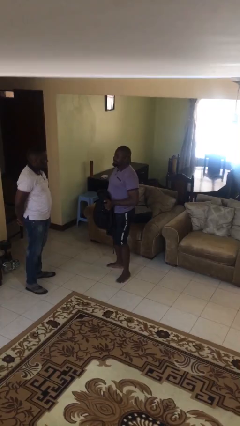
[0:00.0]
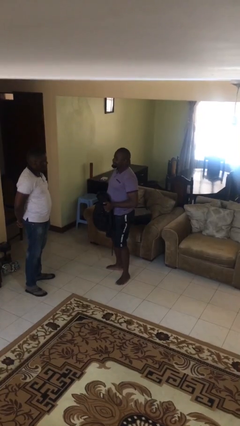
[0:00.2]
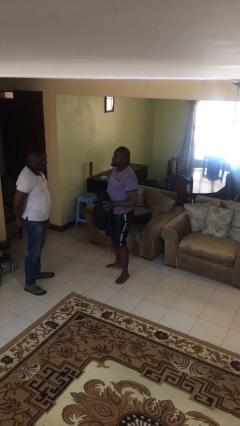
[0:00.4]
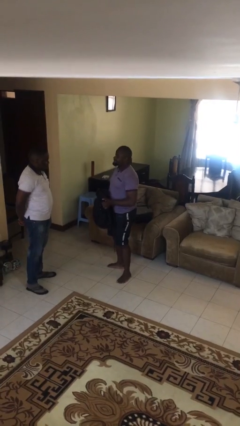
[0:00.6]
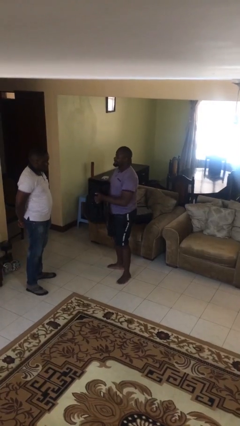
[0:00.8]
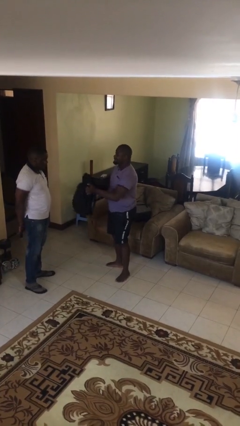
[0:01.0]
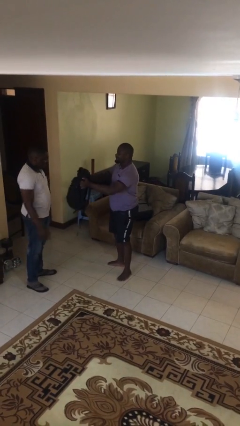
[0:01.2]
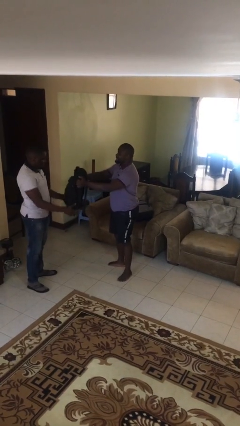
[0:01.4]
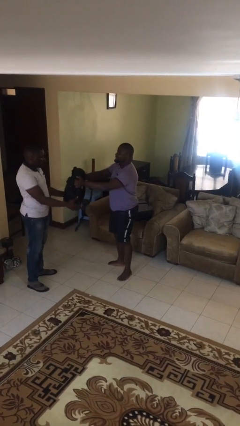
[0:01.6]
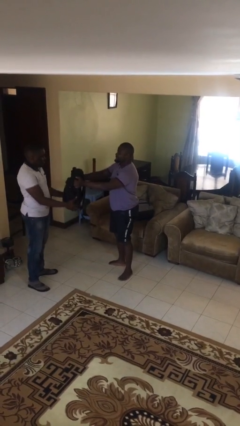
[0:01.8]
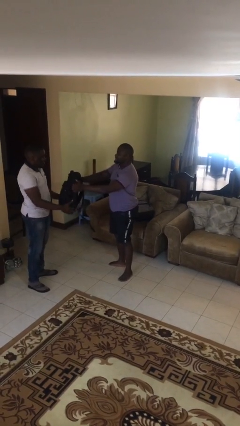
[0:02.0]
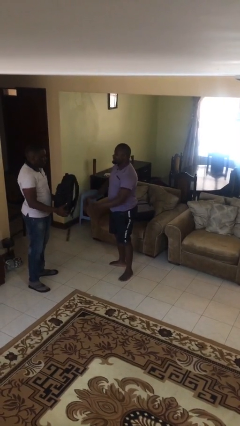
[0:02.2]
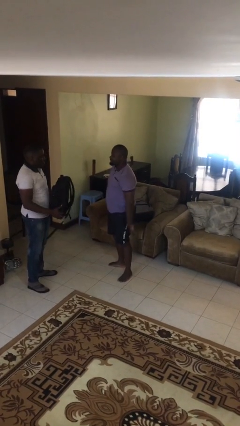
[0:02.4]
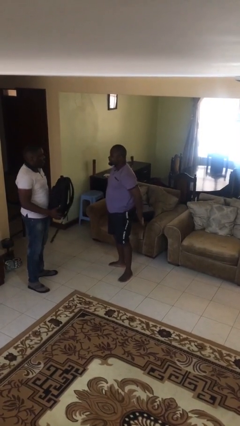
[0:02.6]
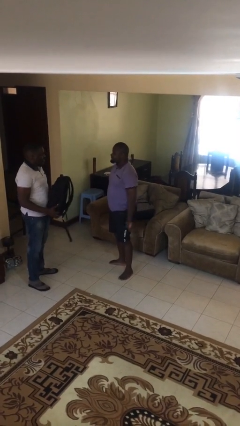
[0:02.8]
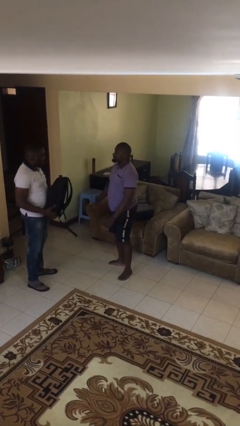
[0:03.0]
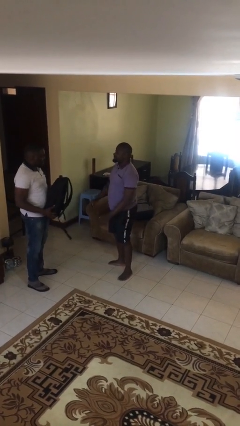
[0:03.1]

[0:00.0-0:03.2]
person transfers object to person

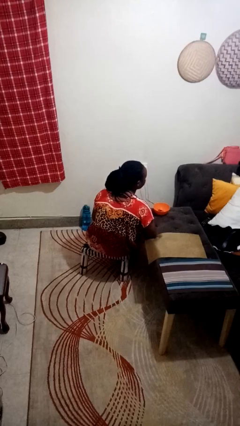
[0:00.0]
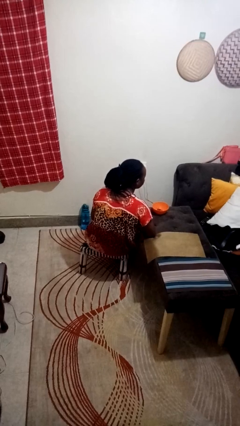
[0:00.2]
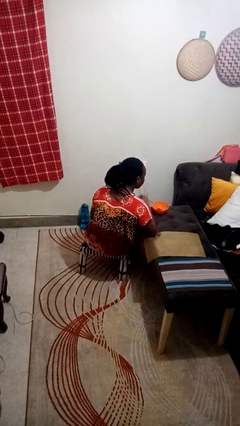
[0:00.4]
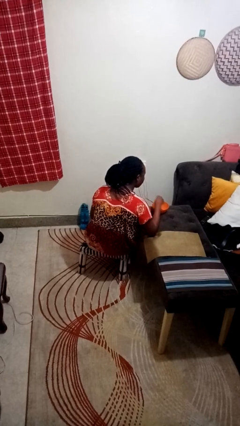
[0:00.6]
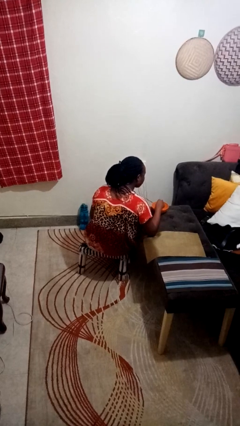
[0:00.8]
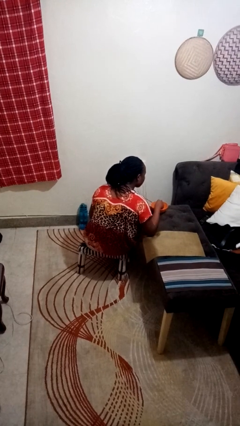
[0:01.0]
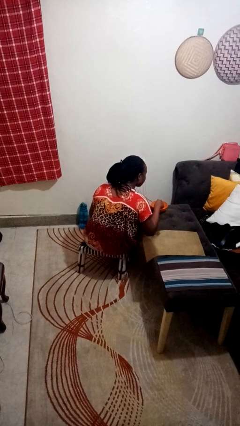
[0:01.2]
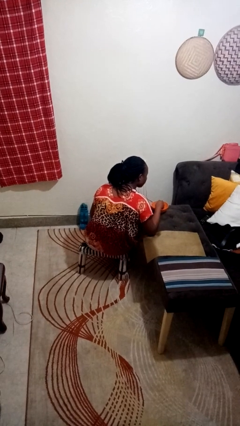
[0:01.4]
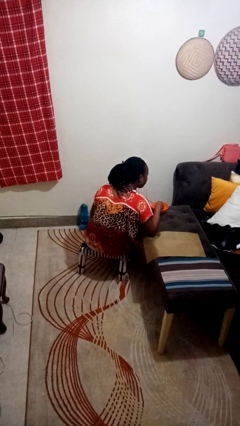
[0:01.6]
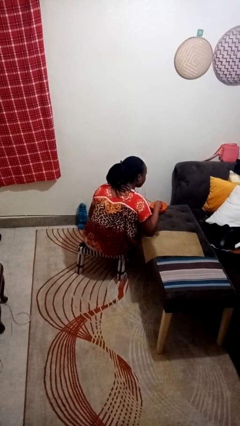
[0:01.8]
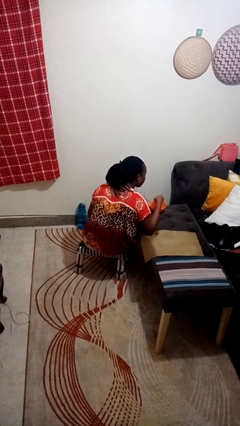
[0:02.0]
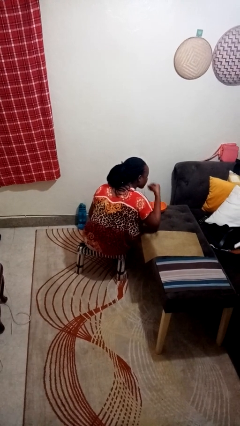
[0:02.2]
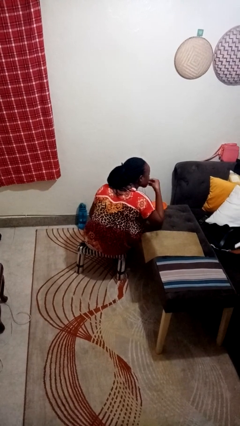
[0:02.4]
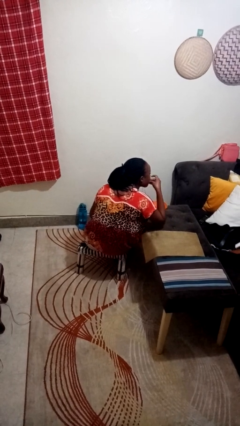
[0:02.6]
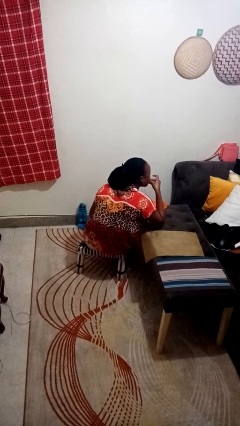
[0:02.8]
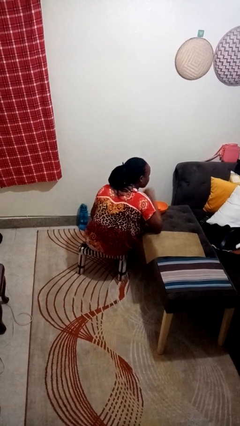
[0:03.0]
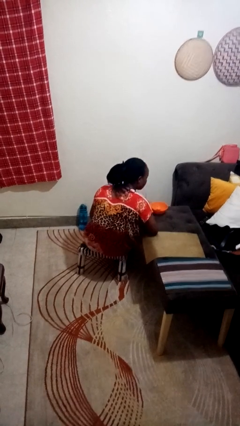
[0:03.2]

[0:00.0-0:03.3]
person eats with hands

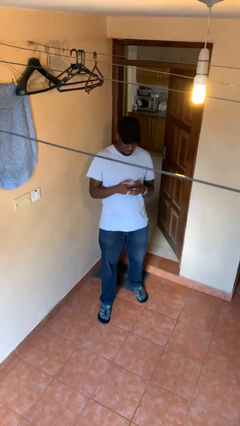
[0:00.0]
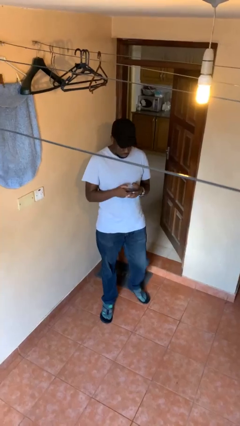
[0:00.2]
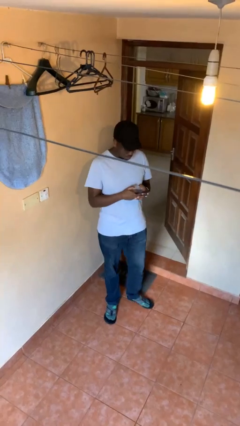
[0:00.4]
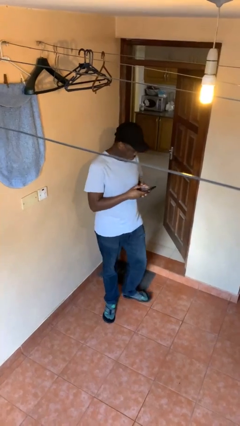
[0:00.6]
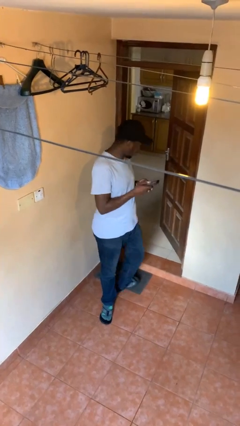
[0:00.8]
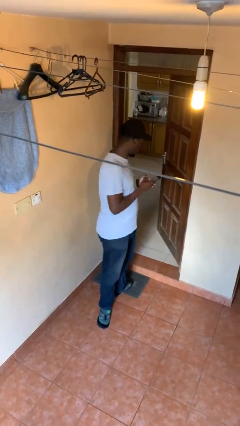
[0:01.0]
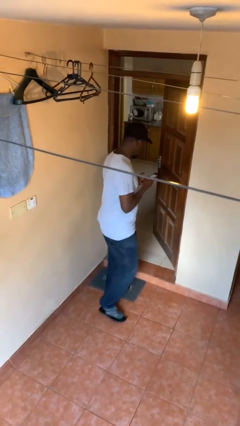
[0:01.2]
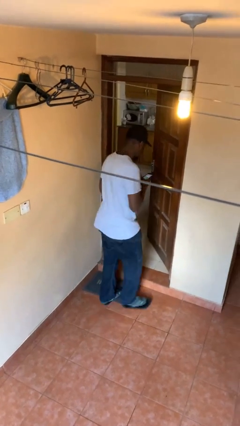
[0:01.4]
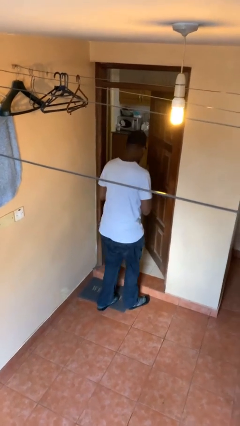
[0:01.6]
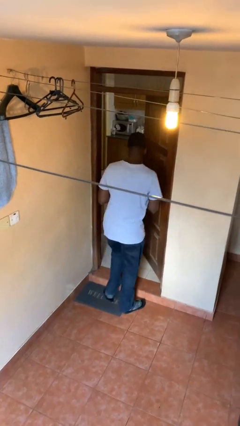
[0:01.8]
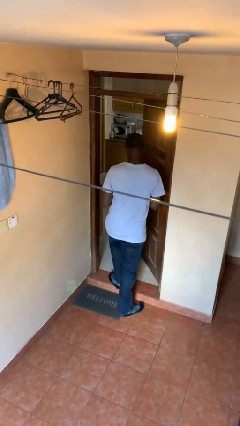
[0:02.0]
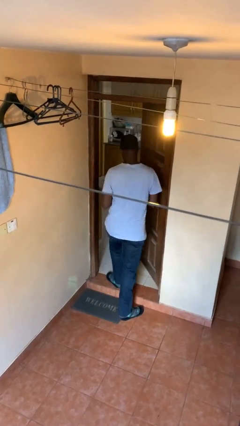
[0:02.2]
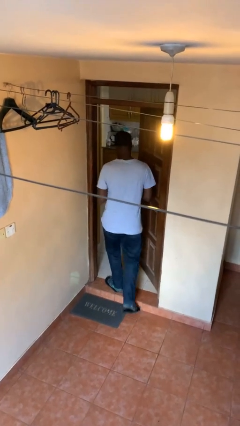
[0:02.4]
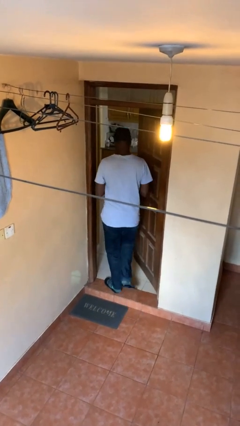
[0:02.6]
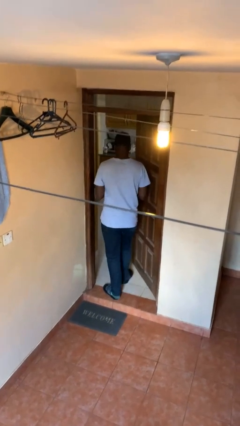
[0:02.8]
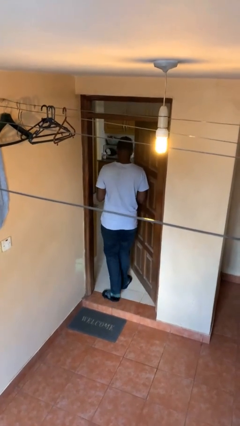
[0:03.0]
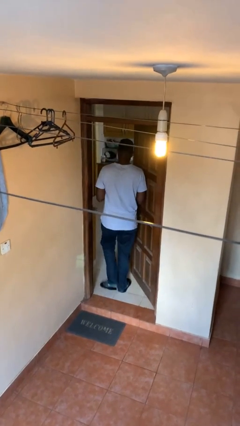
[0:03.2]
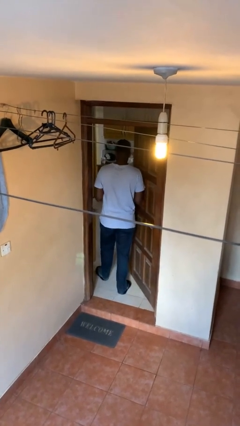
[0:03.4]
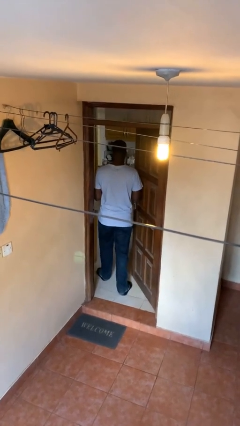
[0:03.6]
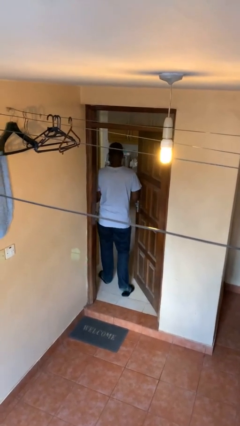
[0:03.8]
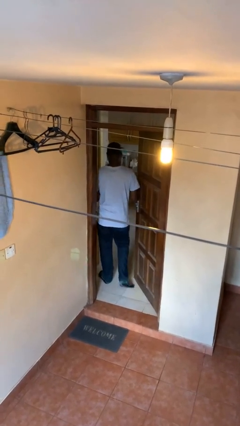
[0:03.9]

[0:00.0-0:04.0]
person exits scene through structure

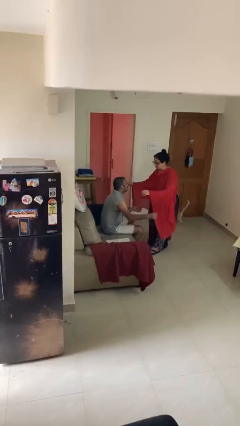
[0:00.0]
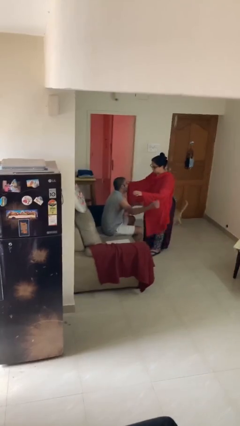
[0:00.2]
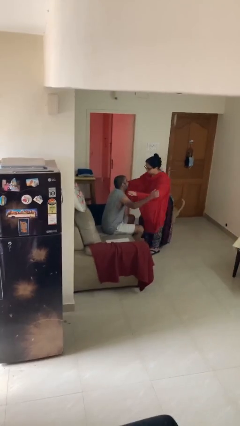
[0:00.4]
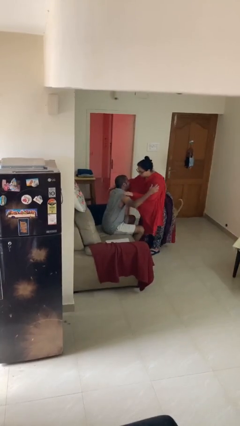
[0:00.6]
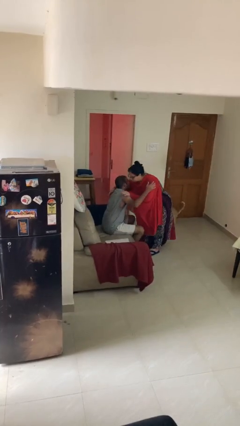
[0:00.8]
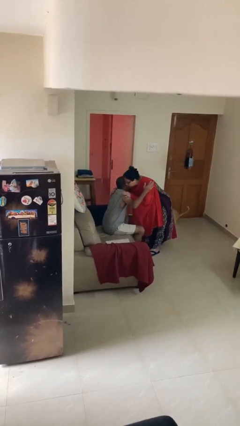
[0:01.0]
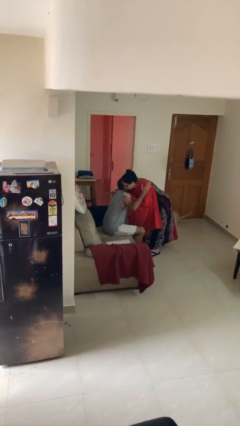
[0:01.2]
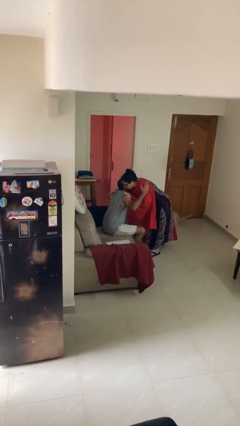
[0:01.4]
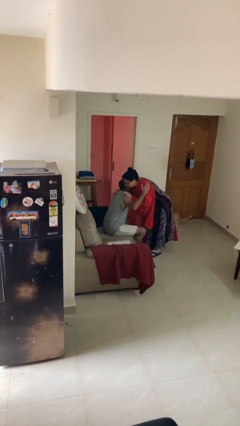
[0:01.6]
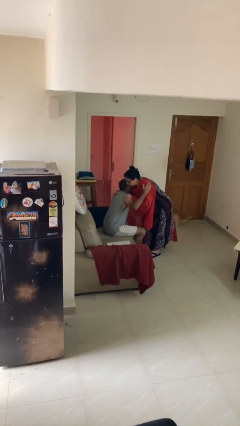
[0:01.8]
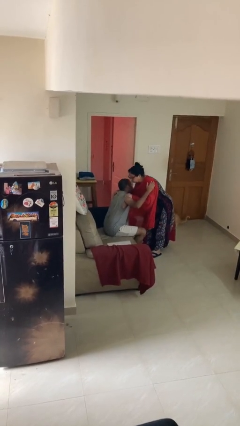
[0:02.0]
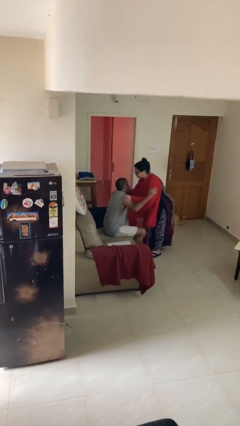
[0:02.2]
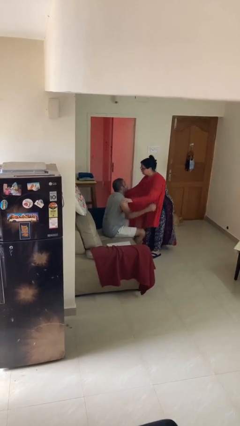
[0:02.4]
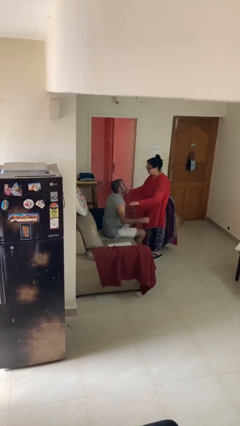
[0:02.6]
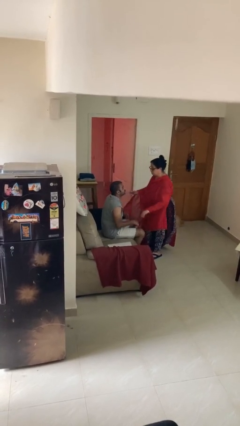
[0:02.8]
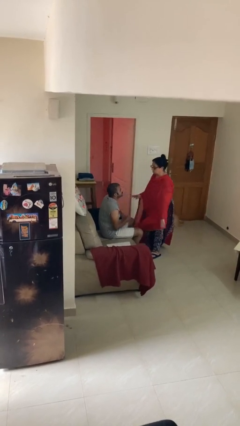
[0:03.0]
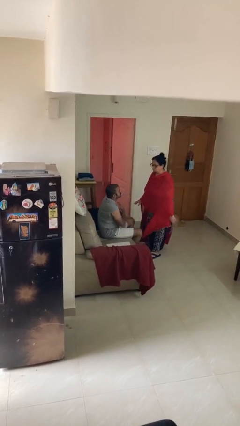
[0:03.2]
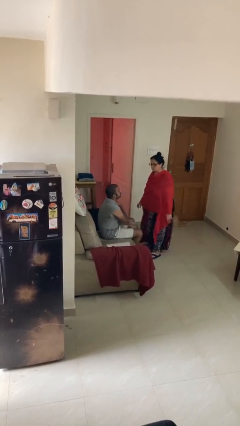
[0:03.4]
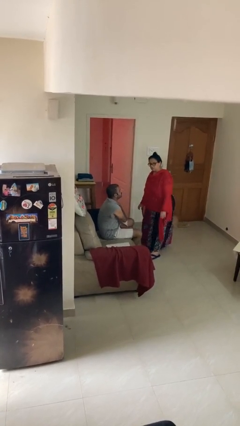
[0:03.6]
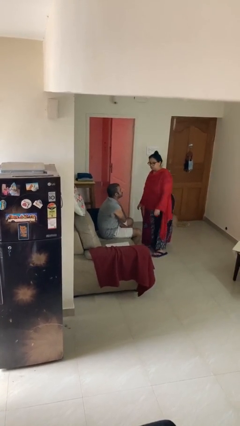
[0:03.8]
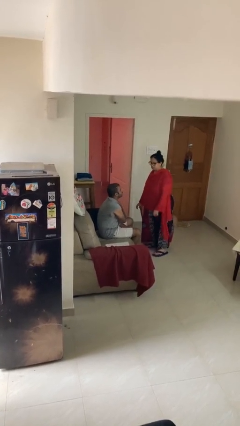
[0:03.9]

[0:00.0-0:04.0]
person embraces person

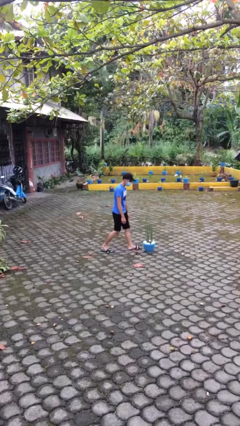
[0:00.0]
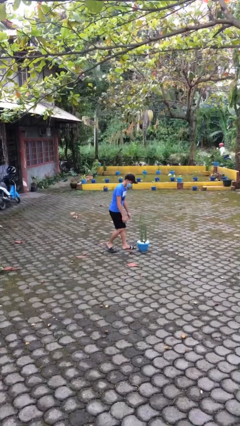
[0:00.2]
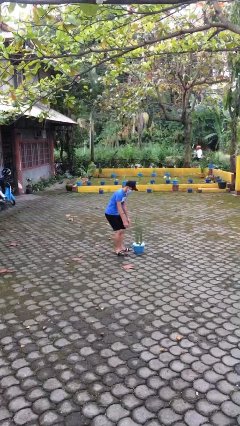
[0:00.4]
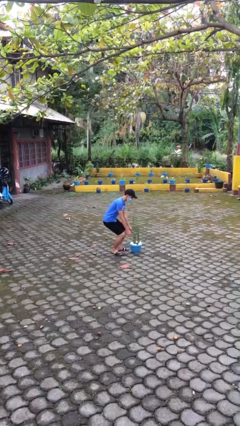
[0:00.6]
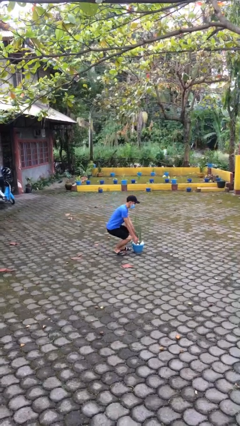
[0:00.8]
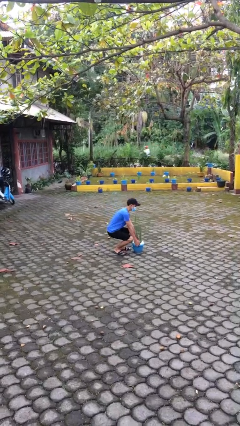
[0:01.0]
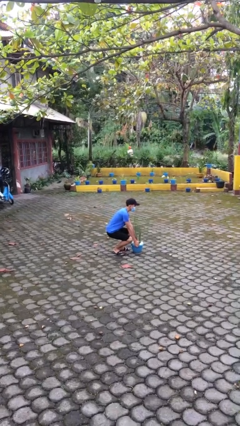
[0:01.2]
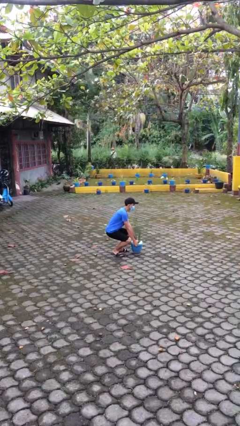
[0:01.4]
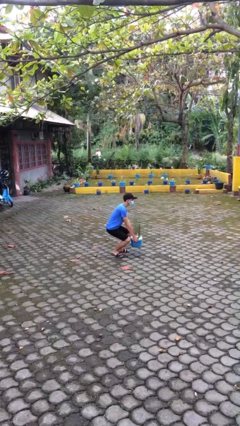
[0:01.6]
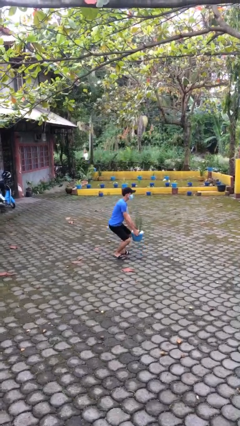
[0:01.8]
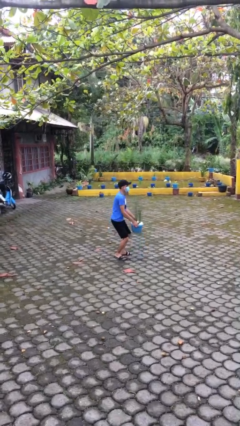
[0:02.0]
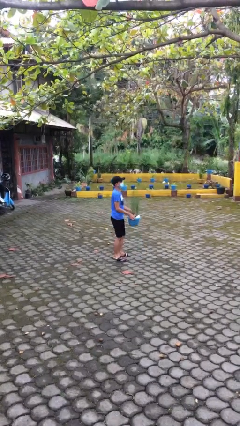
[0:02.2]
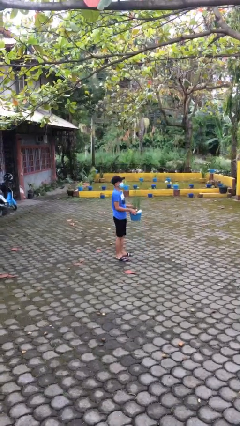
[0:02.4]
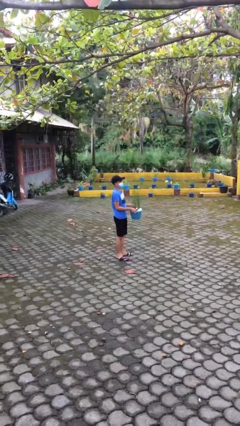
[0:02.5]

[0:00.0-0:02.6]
person picks up object from floor

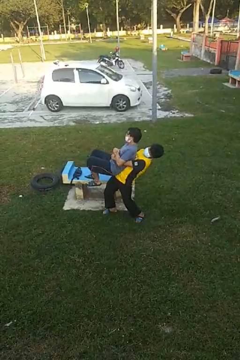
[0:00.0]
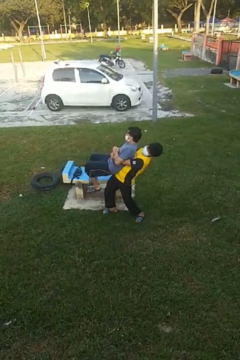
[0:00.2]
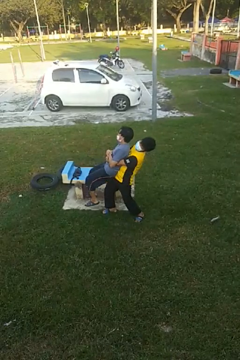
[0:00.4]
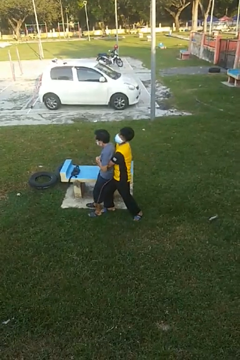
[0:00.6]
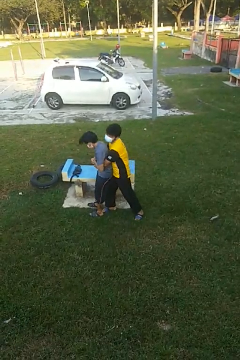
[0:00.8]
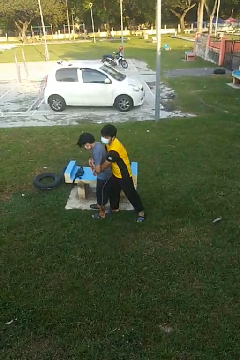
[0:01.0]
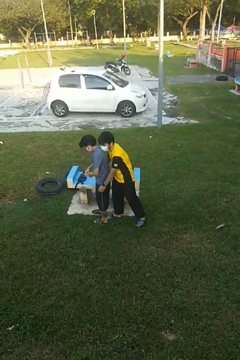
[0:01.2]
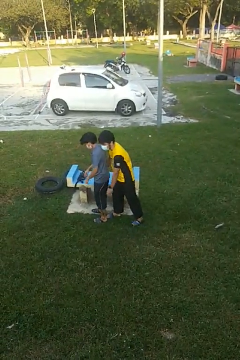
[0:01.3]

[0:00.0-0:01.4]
person puts down person
